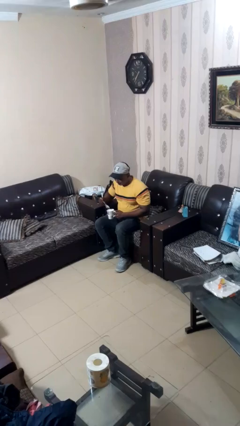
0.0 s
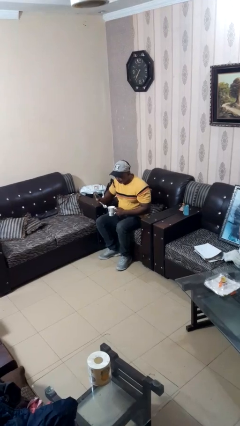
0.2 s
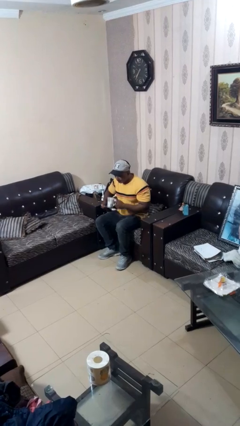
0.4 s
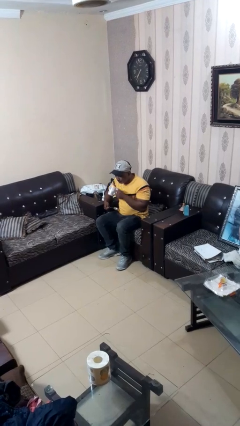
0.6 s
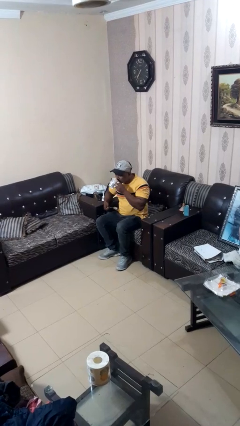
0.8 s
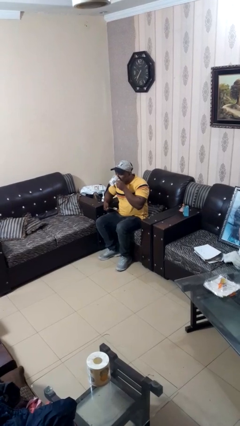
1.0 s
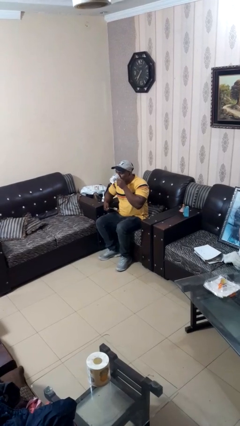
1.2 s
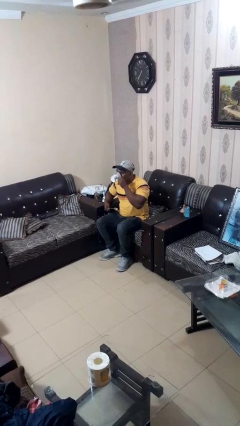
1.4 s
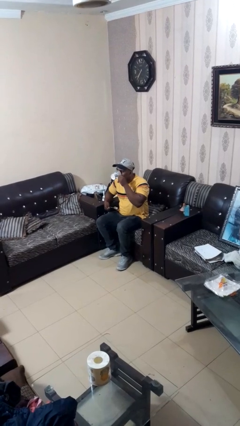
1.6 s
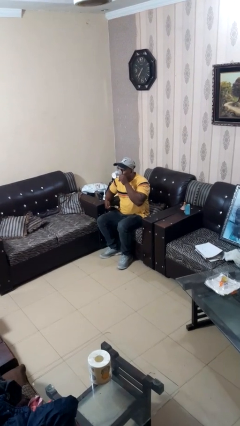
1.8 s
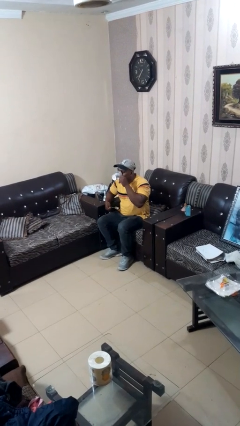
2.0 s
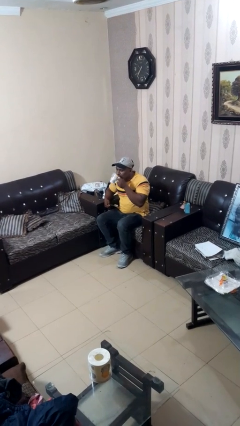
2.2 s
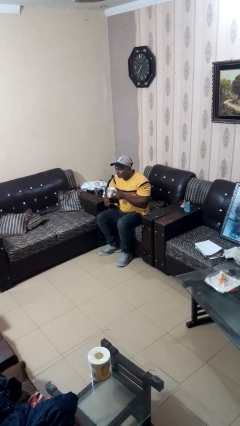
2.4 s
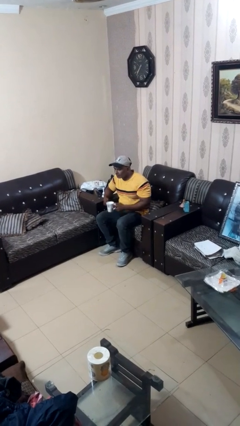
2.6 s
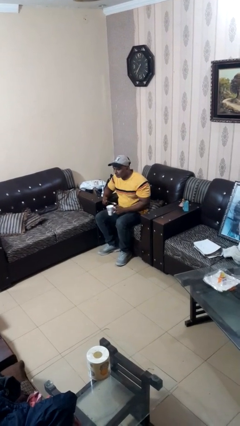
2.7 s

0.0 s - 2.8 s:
person drinks from mug

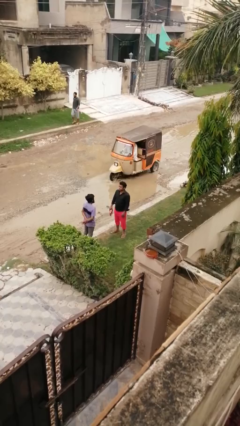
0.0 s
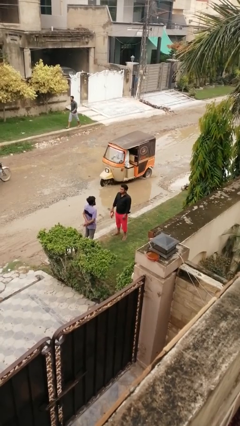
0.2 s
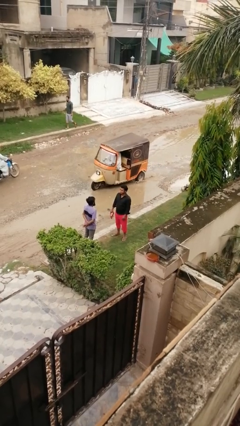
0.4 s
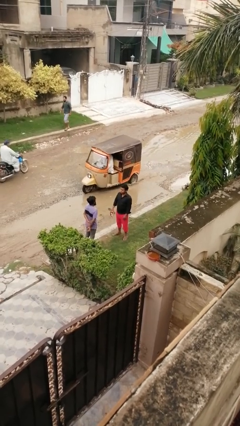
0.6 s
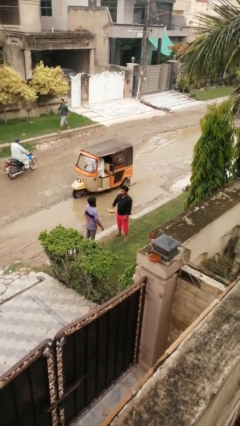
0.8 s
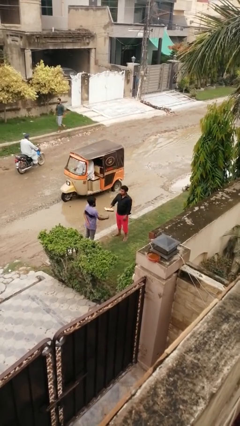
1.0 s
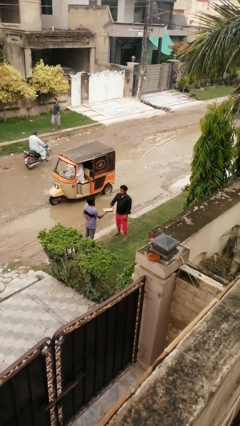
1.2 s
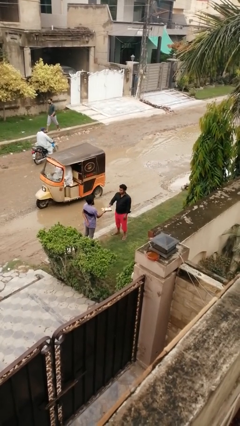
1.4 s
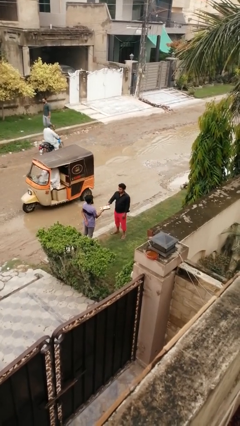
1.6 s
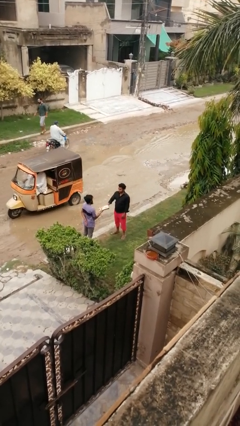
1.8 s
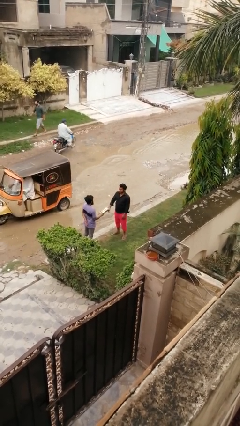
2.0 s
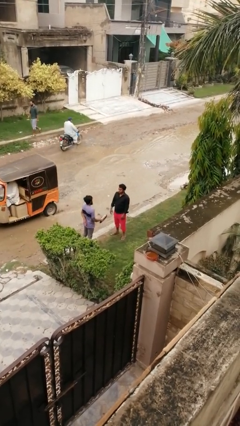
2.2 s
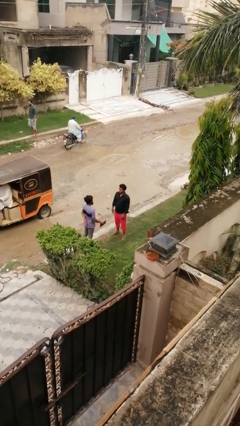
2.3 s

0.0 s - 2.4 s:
person transfers object to person

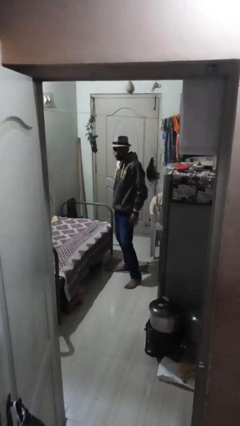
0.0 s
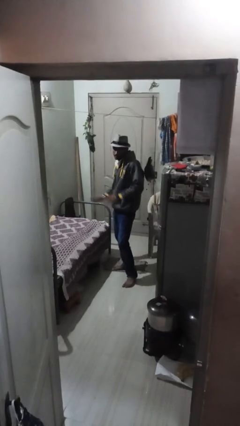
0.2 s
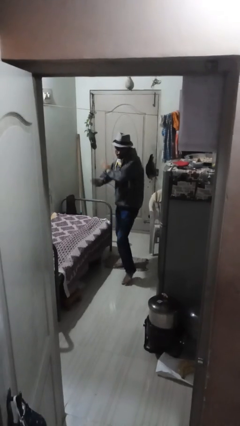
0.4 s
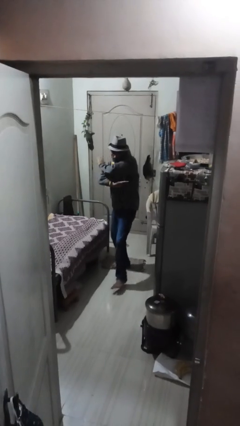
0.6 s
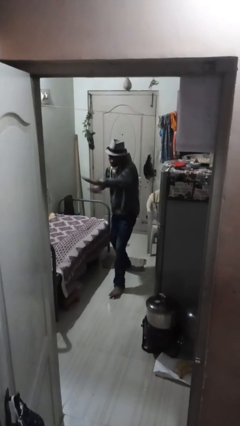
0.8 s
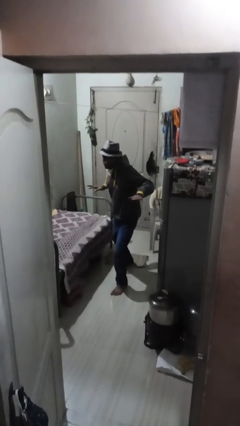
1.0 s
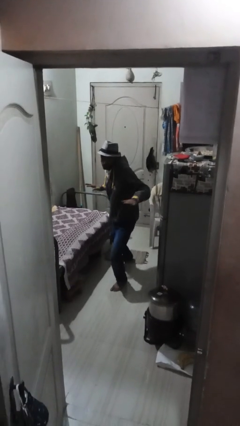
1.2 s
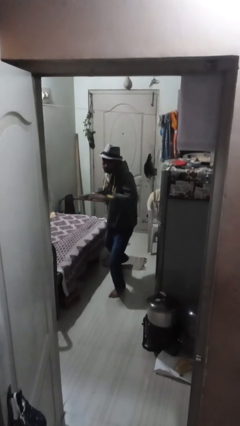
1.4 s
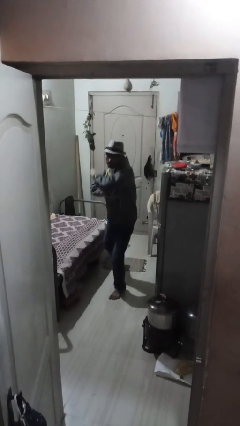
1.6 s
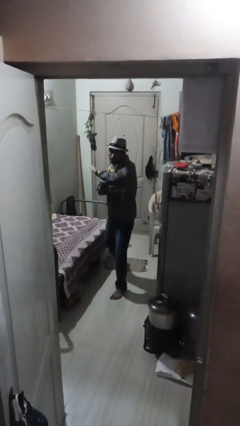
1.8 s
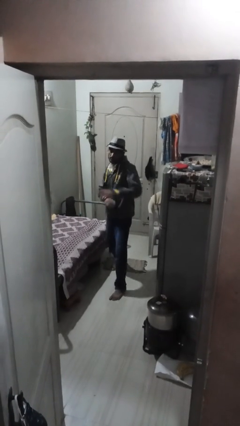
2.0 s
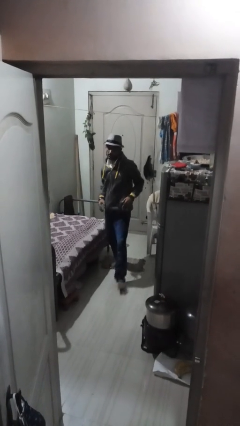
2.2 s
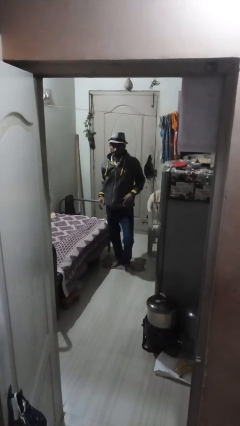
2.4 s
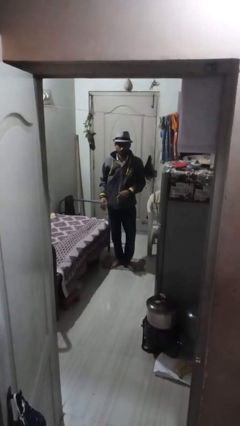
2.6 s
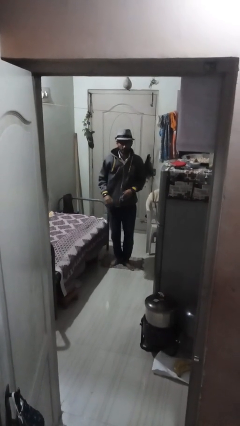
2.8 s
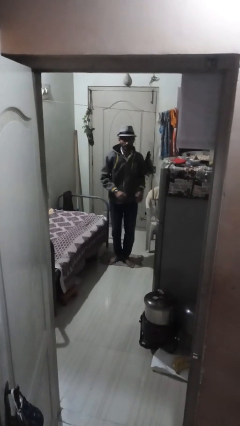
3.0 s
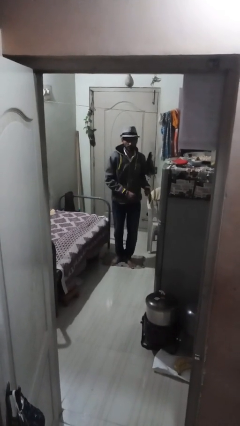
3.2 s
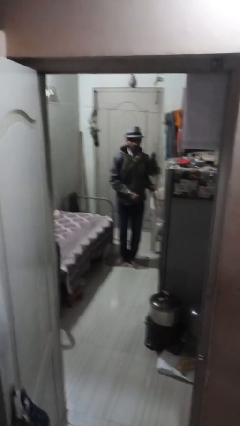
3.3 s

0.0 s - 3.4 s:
person karate chop

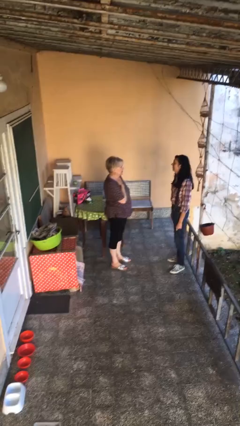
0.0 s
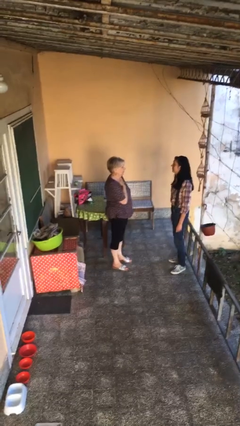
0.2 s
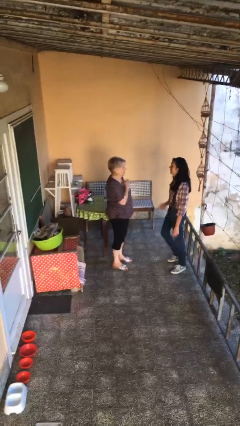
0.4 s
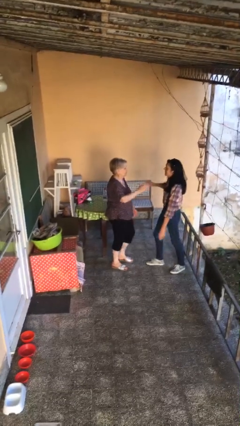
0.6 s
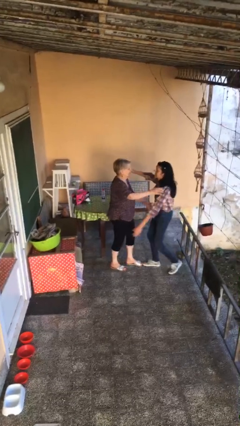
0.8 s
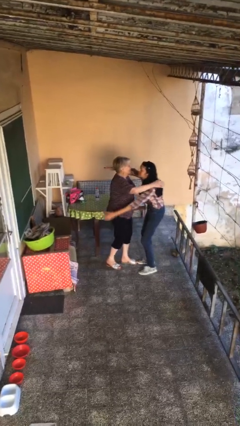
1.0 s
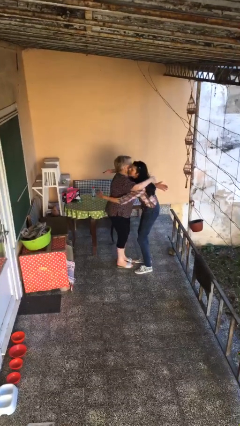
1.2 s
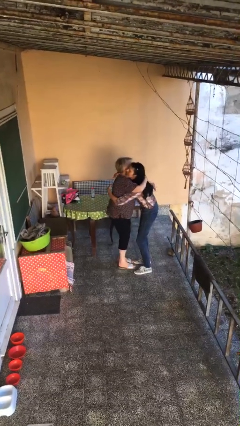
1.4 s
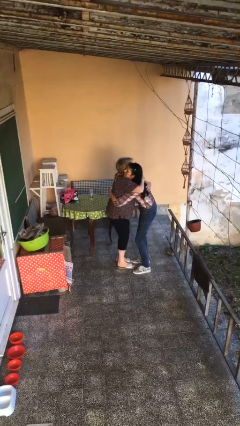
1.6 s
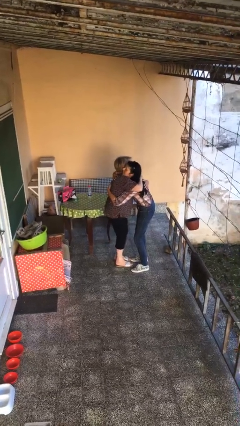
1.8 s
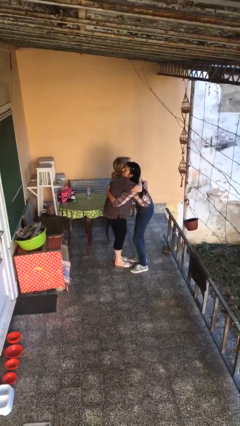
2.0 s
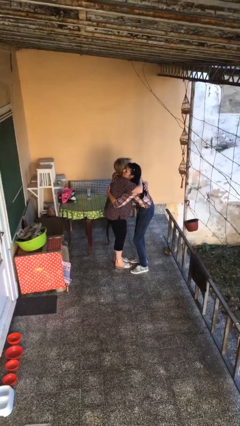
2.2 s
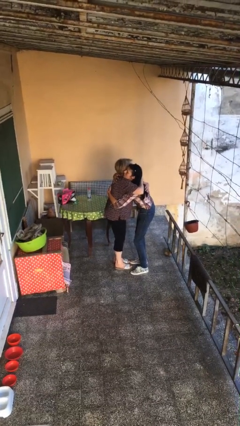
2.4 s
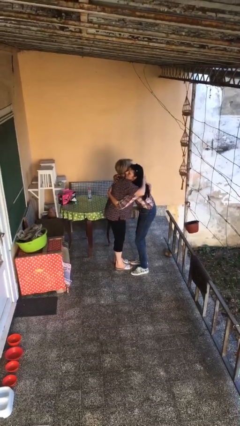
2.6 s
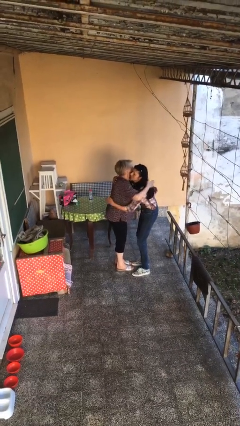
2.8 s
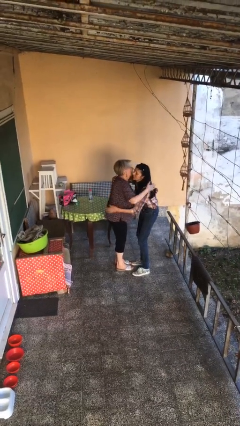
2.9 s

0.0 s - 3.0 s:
person embraces person

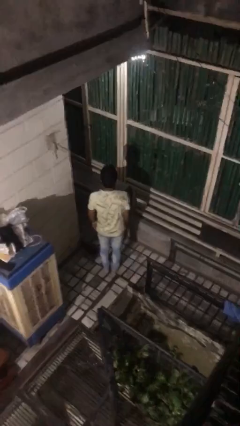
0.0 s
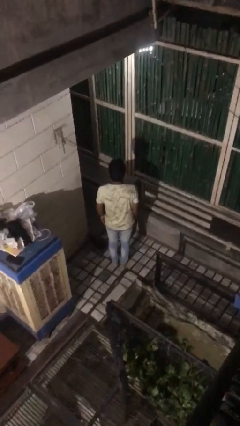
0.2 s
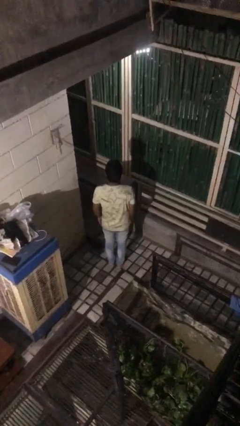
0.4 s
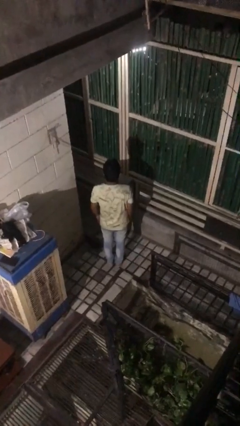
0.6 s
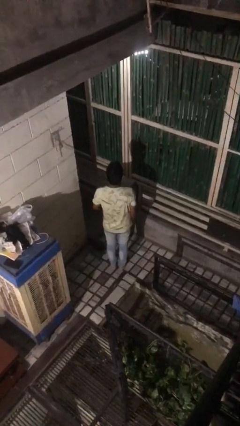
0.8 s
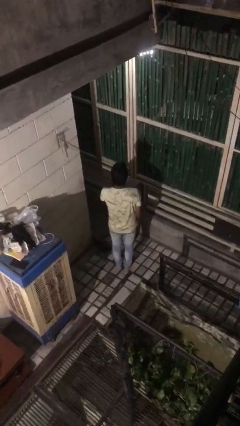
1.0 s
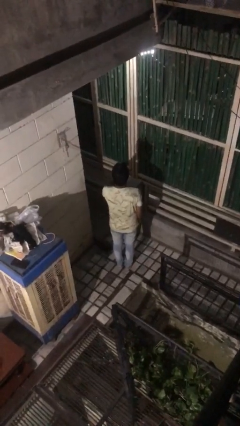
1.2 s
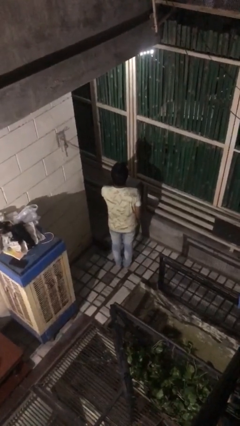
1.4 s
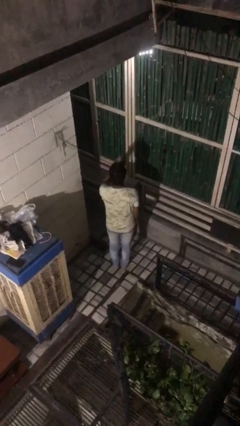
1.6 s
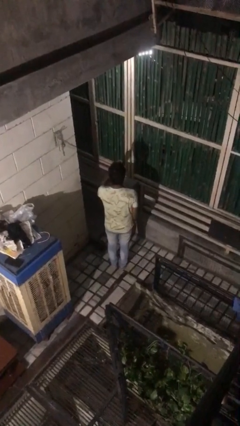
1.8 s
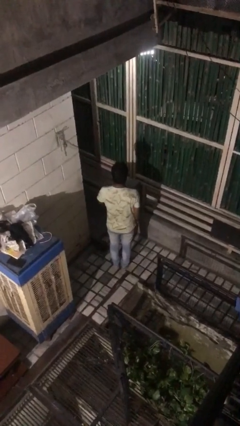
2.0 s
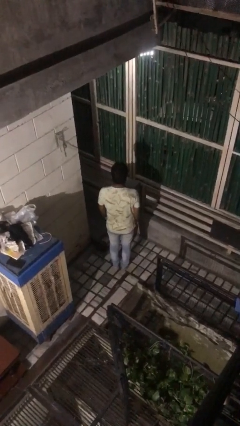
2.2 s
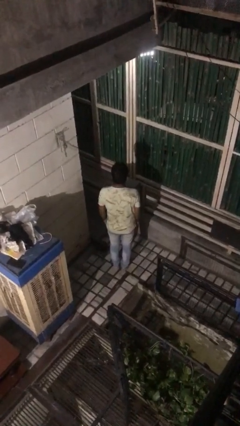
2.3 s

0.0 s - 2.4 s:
person gestures blow kiss

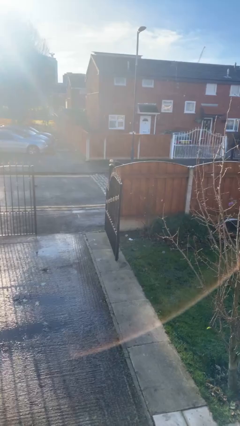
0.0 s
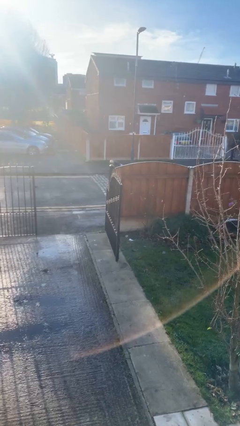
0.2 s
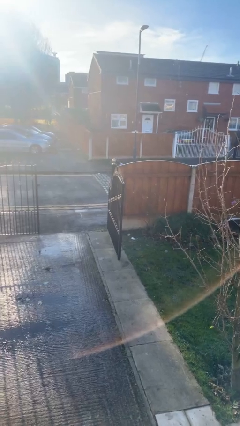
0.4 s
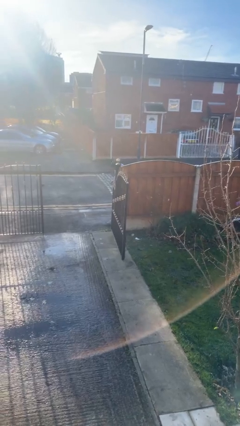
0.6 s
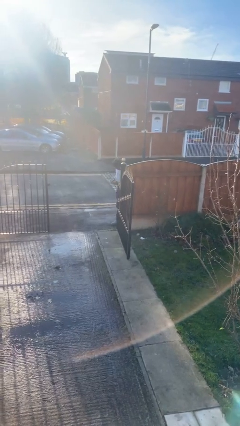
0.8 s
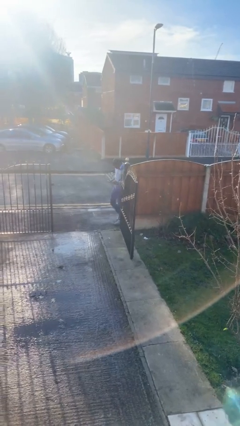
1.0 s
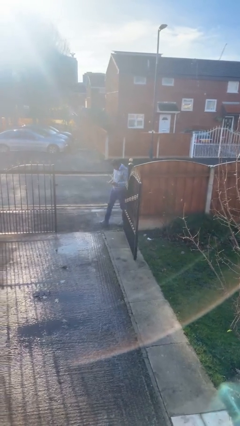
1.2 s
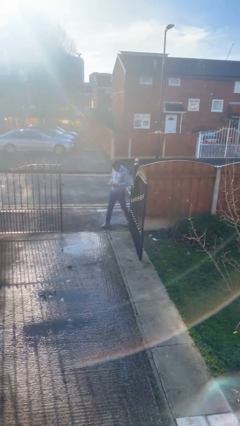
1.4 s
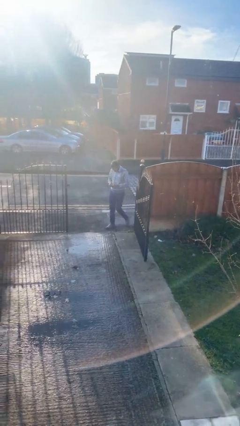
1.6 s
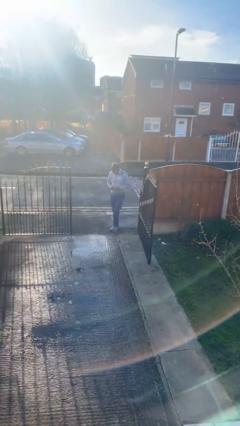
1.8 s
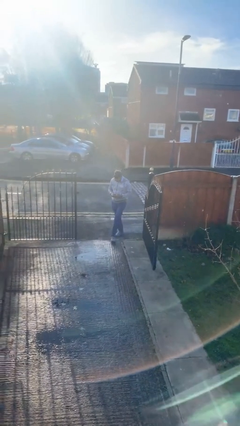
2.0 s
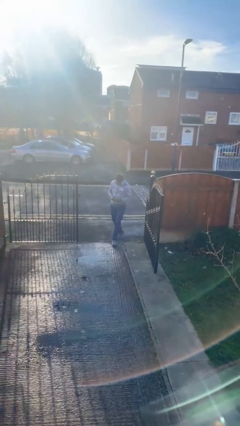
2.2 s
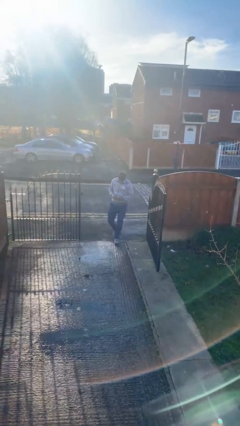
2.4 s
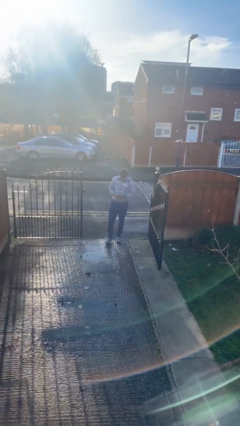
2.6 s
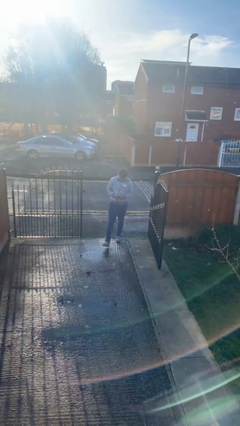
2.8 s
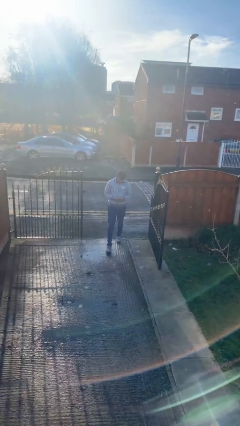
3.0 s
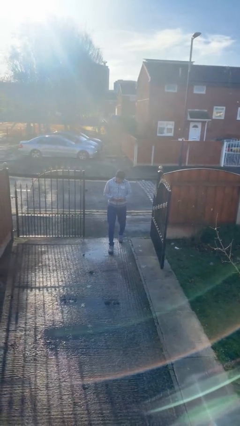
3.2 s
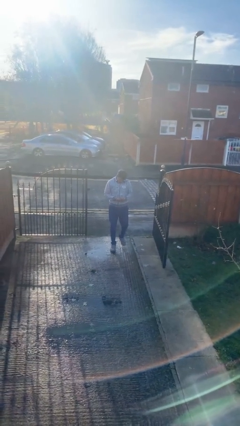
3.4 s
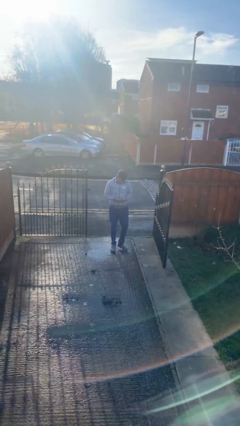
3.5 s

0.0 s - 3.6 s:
person enters scene through structure
